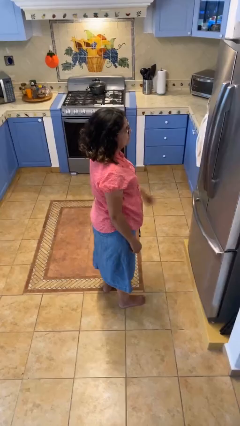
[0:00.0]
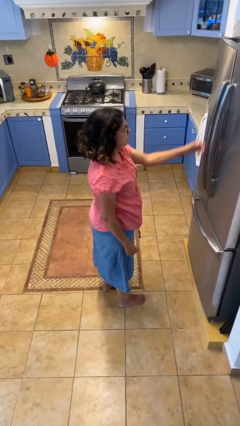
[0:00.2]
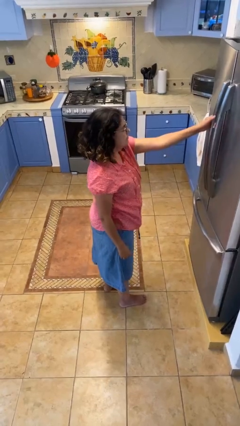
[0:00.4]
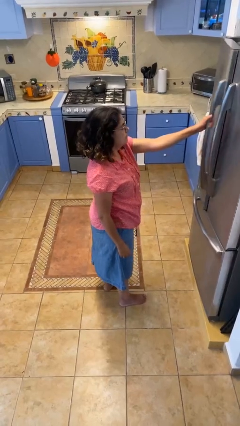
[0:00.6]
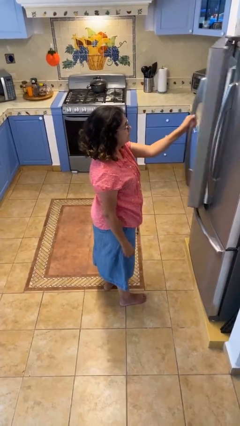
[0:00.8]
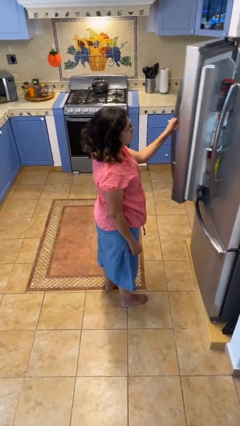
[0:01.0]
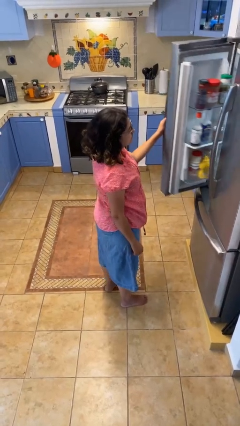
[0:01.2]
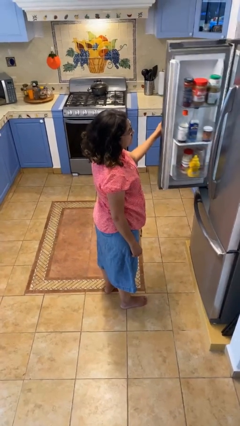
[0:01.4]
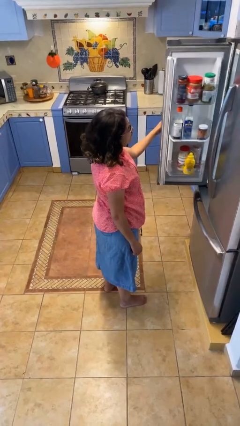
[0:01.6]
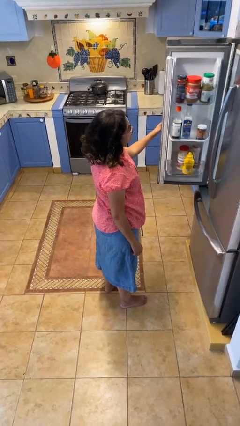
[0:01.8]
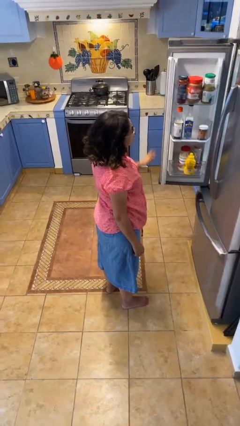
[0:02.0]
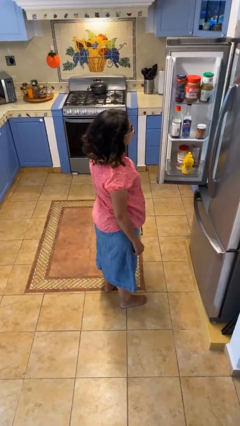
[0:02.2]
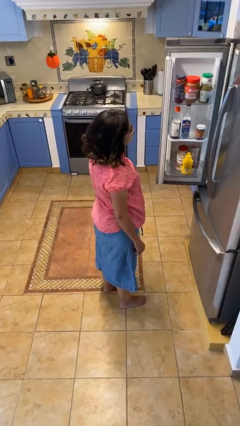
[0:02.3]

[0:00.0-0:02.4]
person opens refrigerator

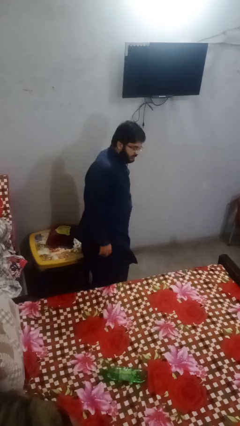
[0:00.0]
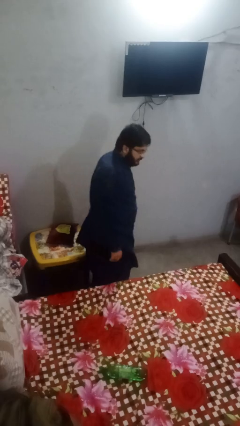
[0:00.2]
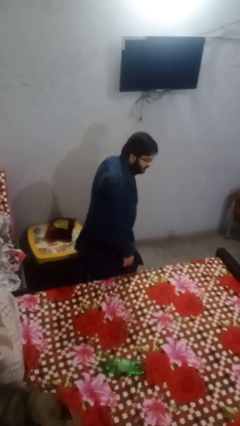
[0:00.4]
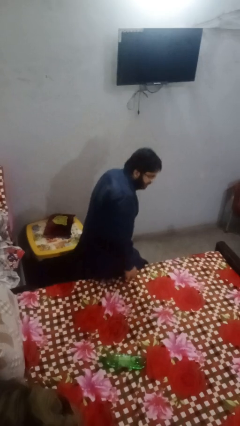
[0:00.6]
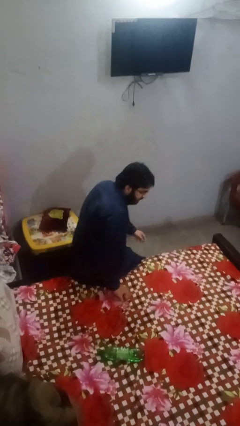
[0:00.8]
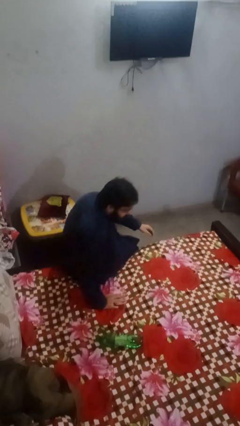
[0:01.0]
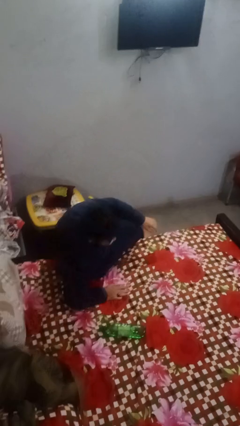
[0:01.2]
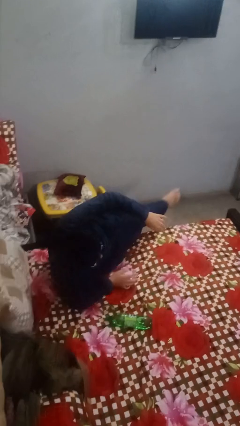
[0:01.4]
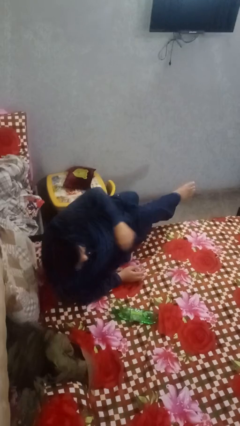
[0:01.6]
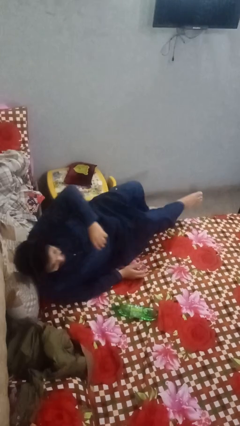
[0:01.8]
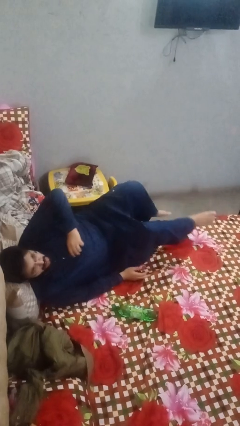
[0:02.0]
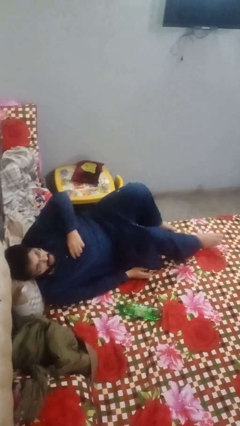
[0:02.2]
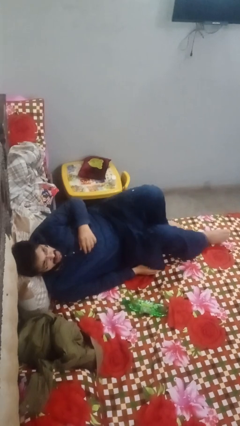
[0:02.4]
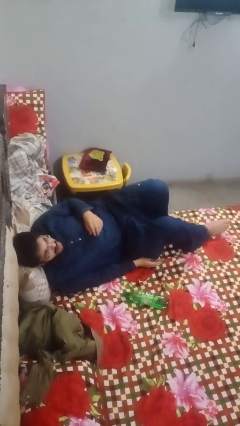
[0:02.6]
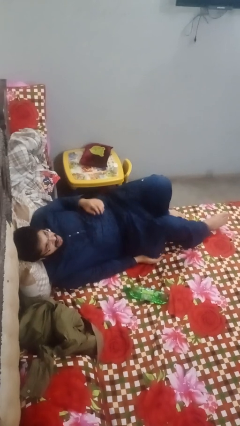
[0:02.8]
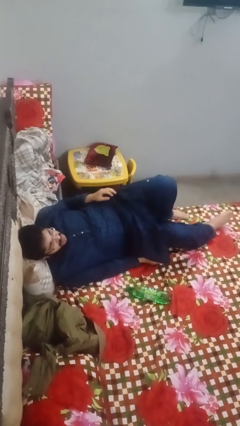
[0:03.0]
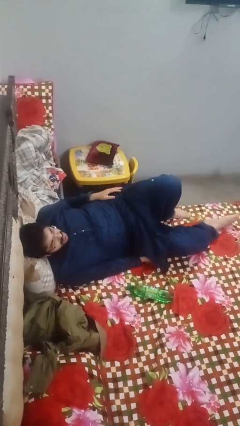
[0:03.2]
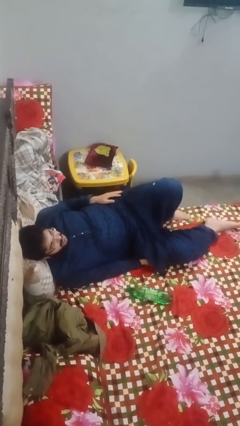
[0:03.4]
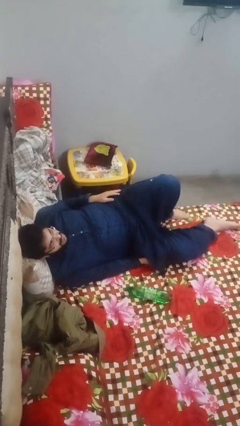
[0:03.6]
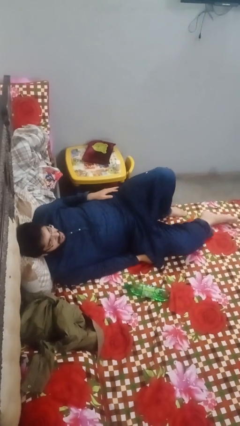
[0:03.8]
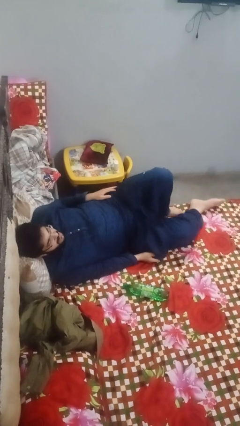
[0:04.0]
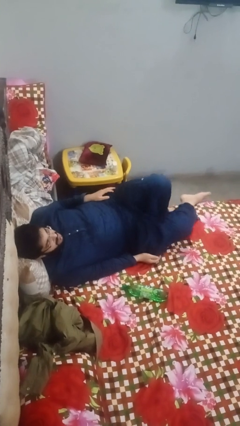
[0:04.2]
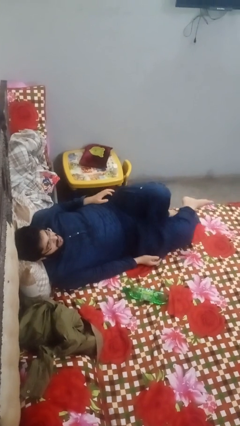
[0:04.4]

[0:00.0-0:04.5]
person lies down on bed

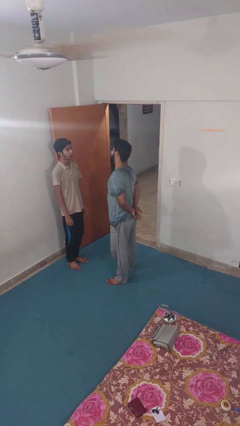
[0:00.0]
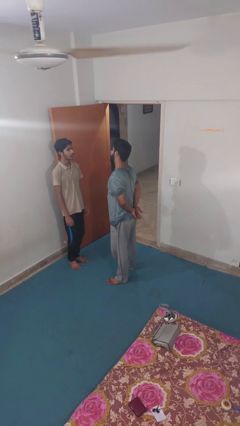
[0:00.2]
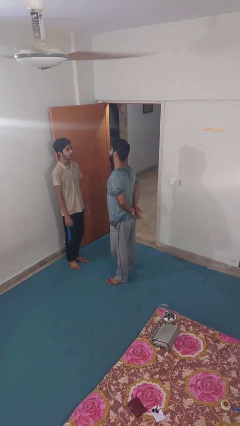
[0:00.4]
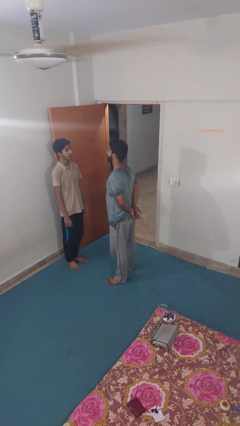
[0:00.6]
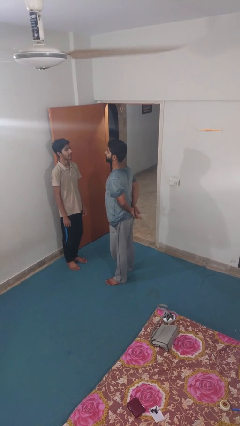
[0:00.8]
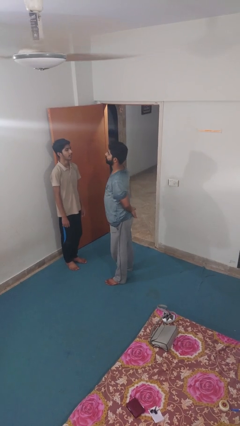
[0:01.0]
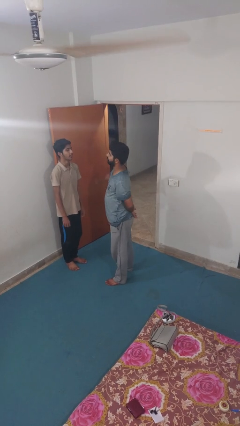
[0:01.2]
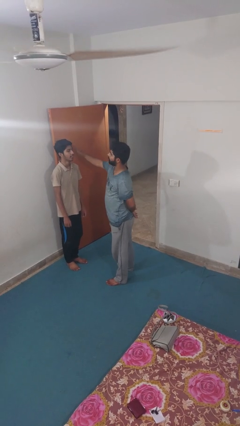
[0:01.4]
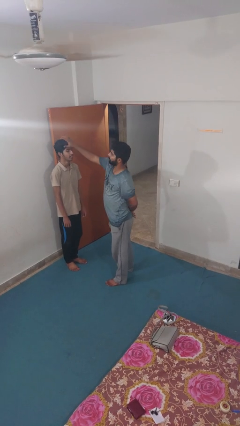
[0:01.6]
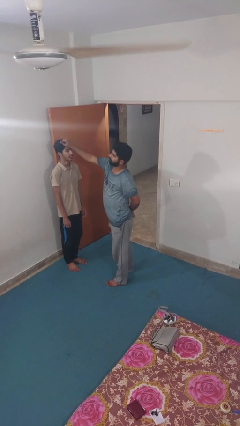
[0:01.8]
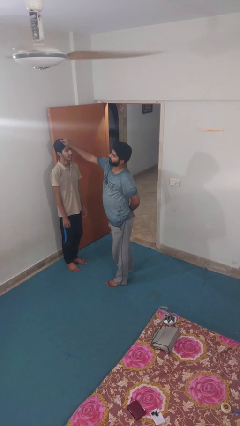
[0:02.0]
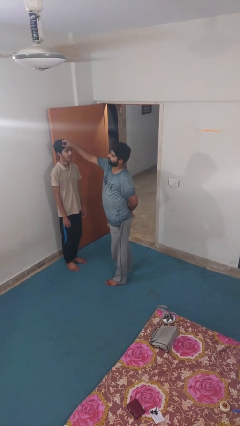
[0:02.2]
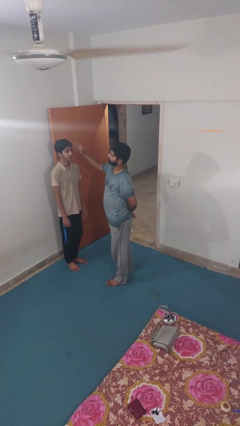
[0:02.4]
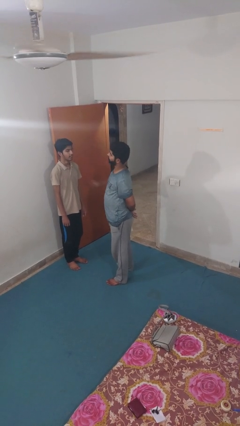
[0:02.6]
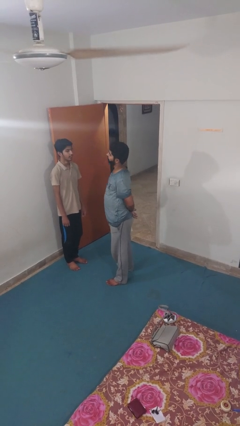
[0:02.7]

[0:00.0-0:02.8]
person grabs person by hair

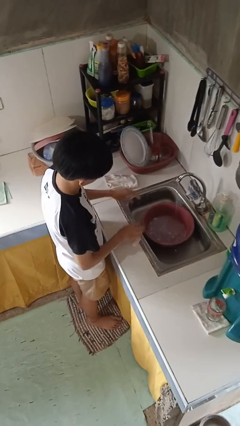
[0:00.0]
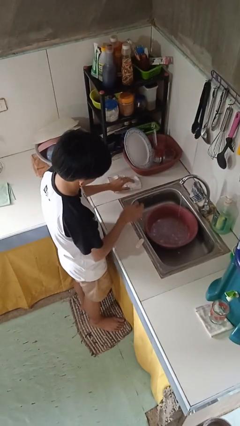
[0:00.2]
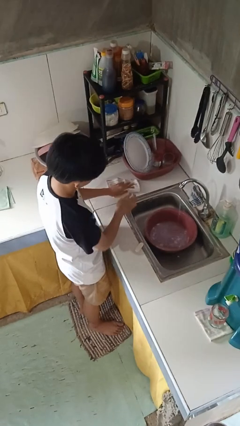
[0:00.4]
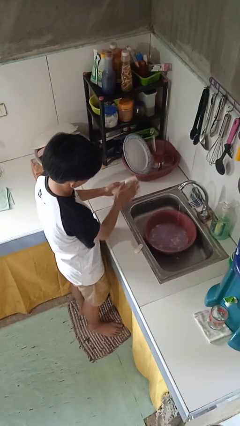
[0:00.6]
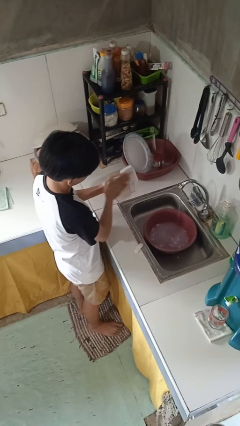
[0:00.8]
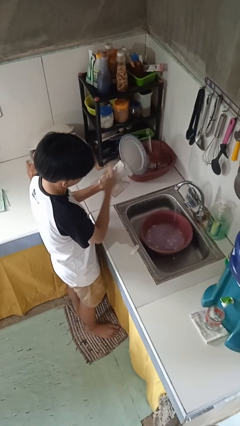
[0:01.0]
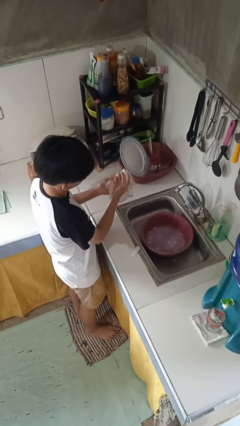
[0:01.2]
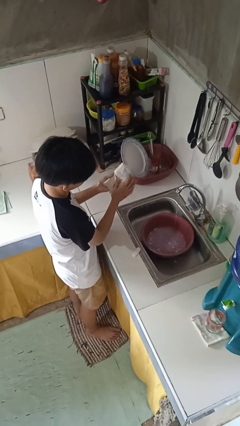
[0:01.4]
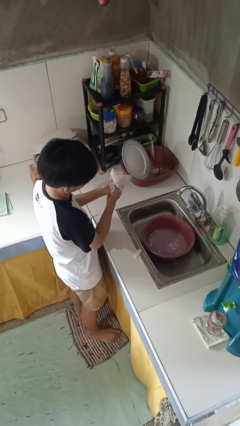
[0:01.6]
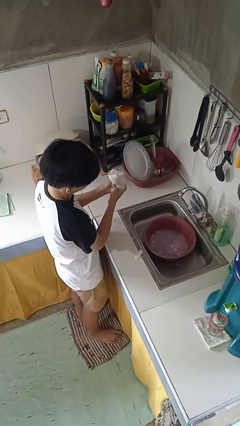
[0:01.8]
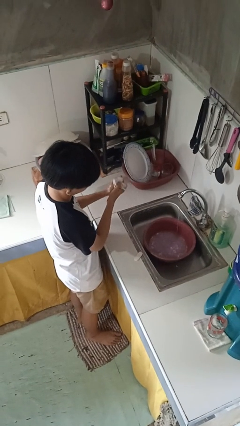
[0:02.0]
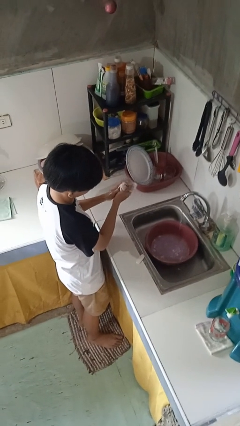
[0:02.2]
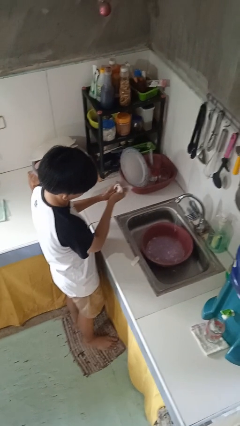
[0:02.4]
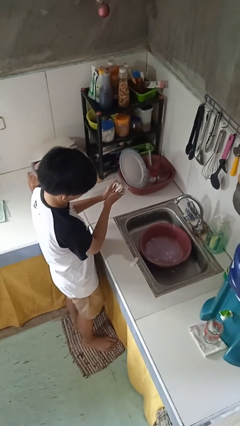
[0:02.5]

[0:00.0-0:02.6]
person dries hands with towel

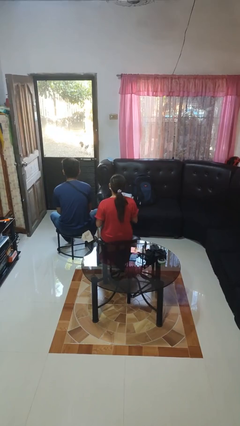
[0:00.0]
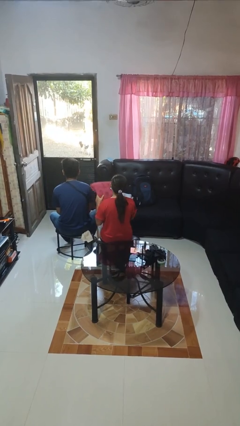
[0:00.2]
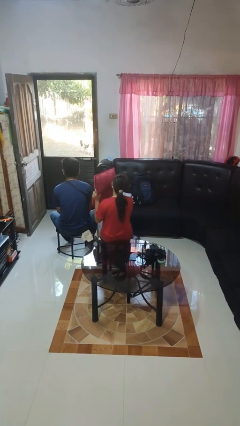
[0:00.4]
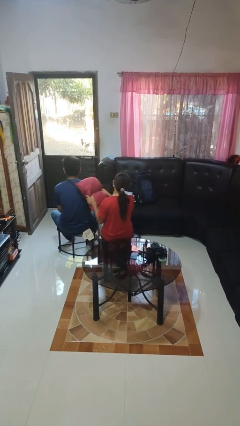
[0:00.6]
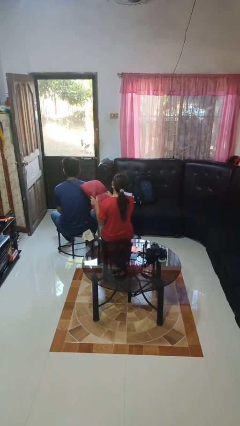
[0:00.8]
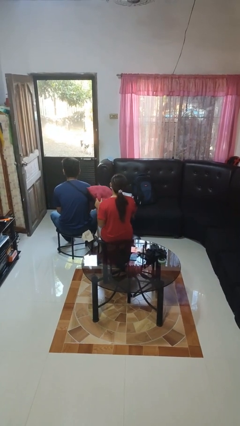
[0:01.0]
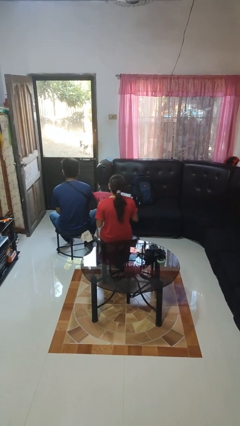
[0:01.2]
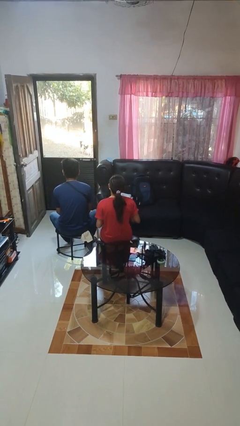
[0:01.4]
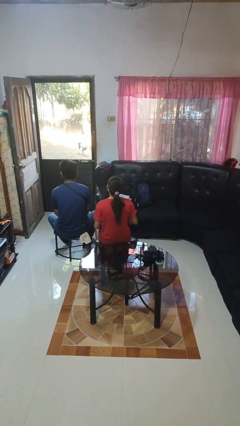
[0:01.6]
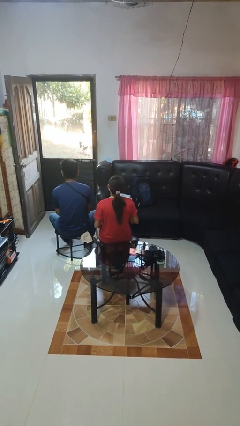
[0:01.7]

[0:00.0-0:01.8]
person hits person with pillow

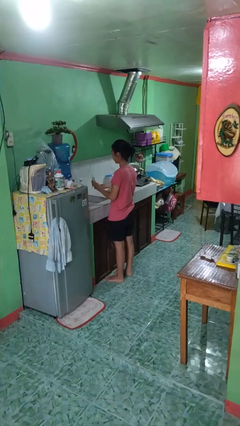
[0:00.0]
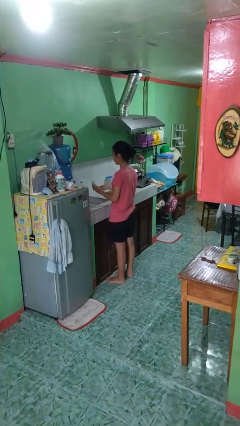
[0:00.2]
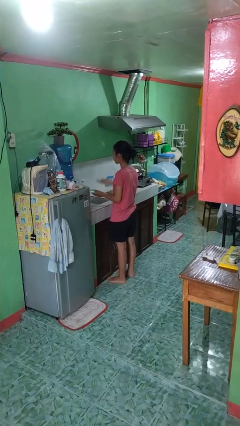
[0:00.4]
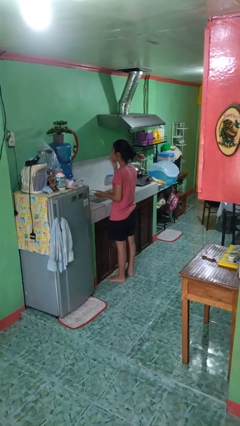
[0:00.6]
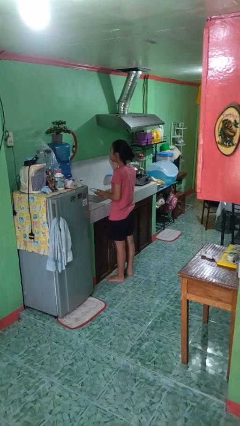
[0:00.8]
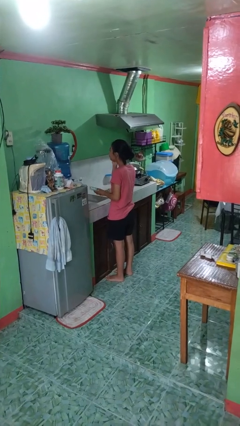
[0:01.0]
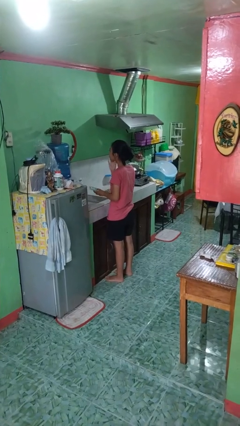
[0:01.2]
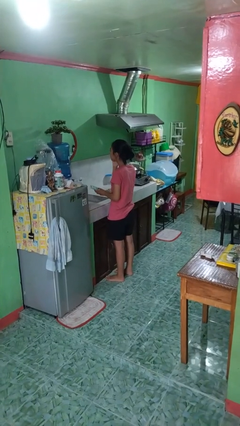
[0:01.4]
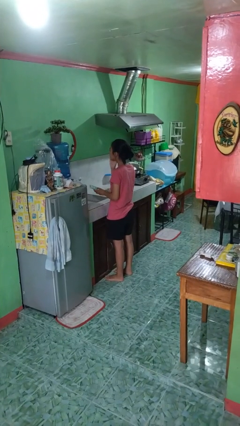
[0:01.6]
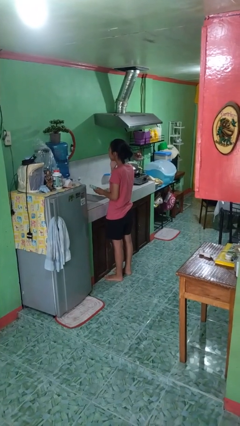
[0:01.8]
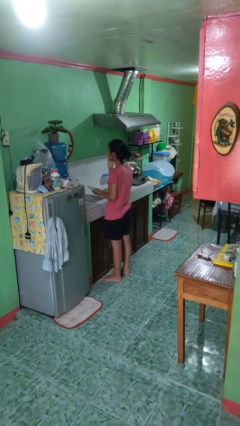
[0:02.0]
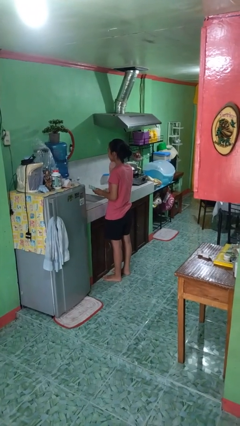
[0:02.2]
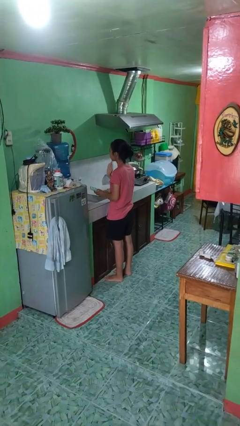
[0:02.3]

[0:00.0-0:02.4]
person applies facial moisturizer

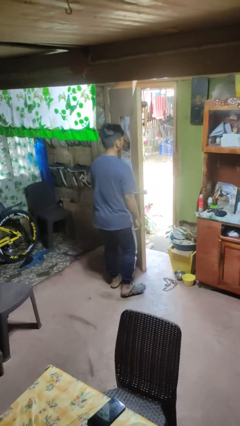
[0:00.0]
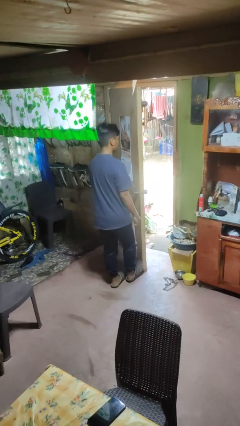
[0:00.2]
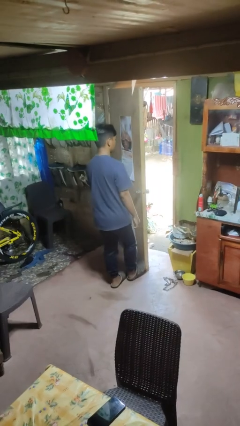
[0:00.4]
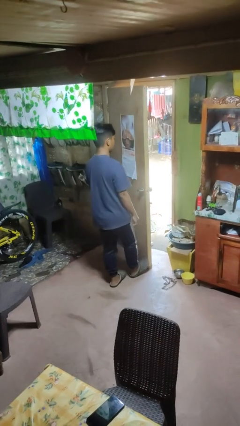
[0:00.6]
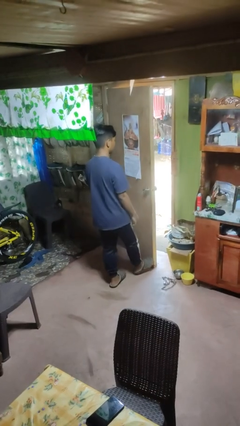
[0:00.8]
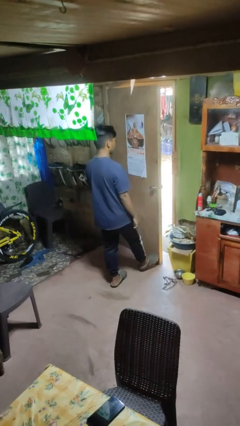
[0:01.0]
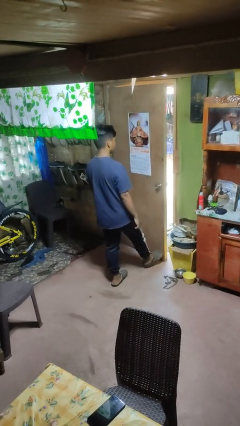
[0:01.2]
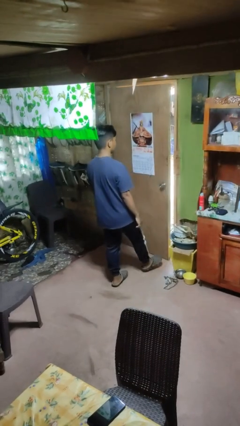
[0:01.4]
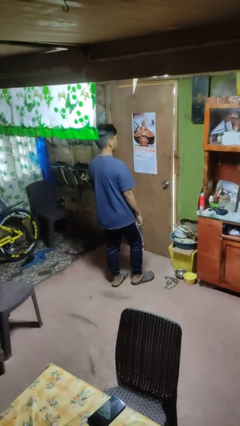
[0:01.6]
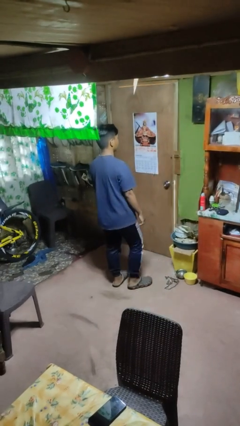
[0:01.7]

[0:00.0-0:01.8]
person closes door with foot
